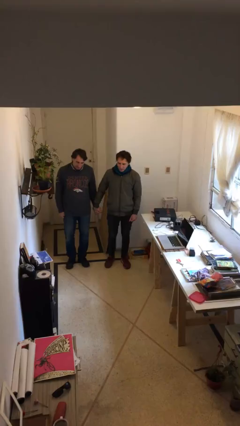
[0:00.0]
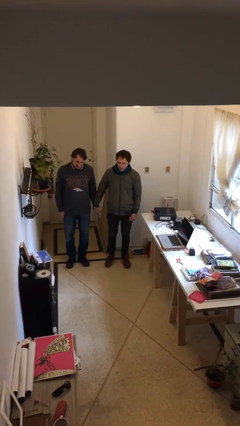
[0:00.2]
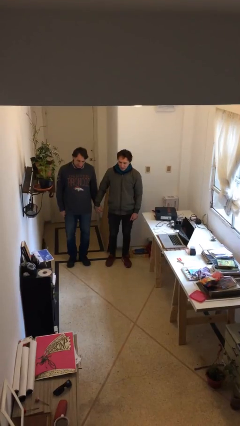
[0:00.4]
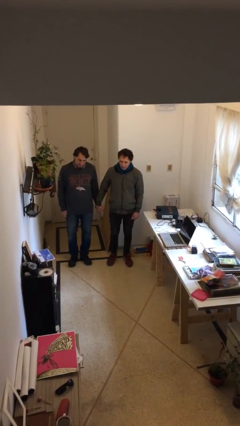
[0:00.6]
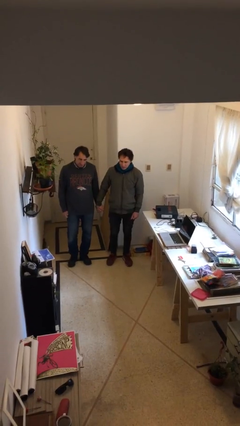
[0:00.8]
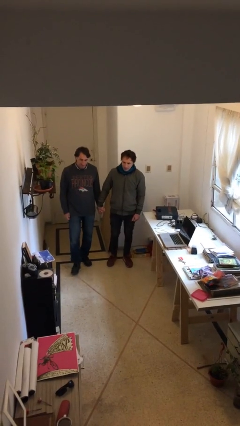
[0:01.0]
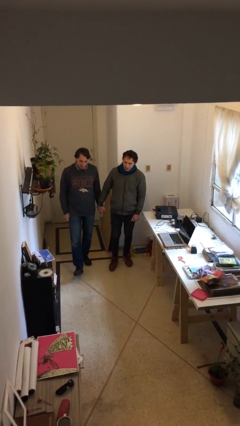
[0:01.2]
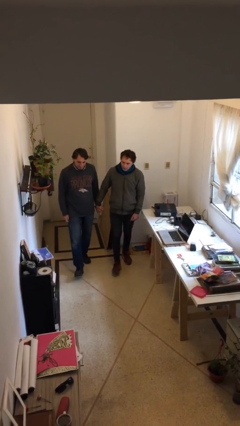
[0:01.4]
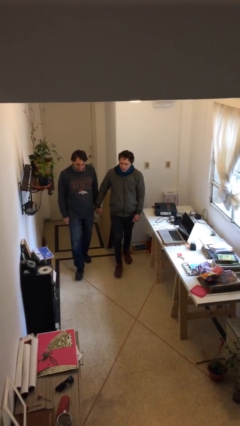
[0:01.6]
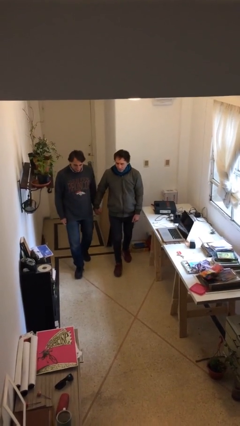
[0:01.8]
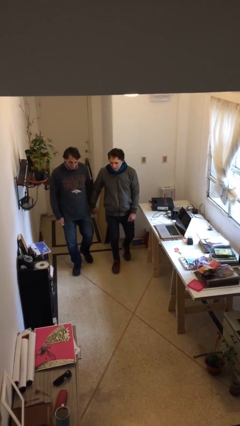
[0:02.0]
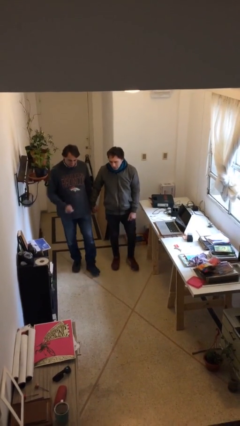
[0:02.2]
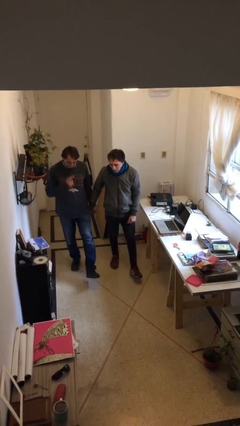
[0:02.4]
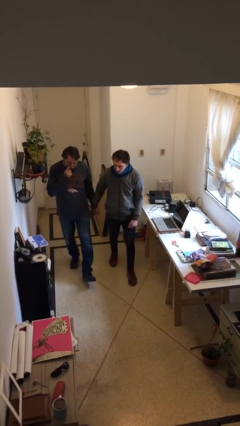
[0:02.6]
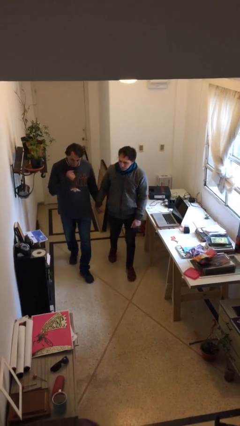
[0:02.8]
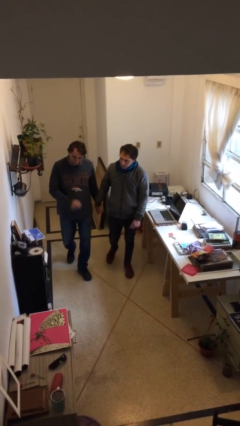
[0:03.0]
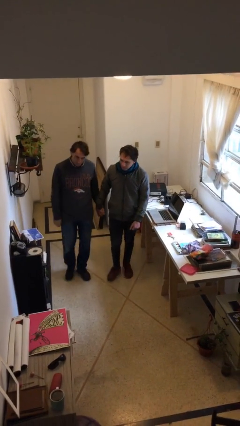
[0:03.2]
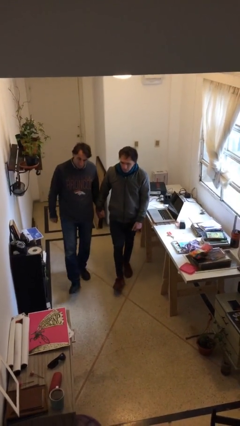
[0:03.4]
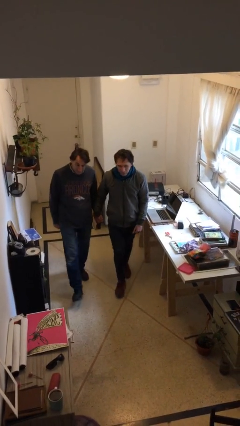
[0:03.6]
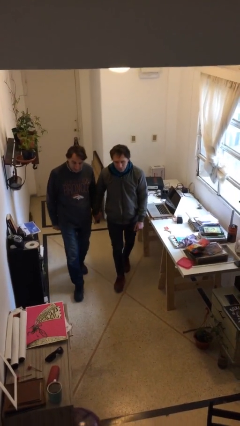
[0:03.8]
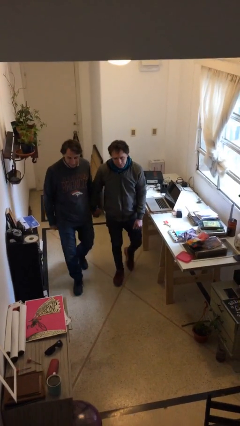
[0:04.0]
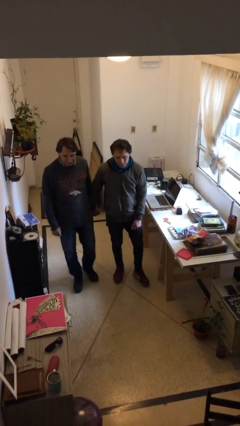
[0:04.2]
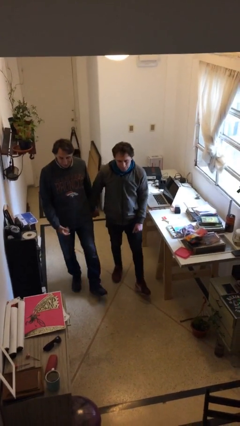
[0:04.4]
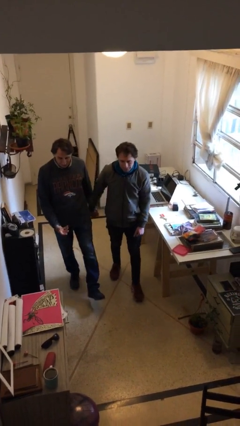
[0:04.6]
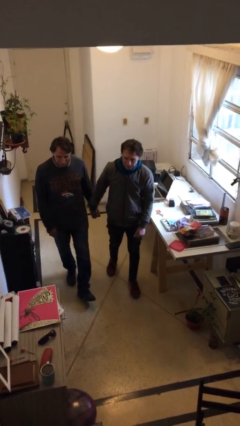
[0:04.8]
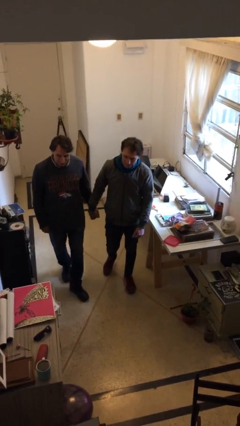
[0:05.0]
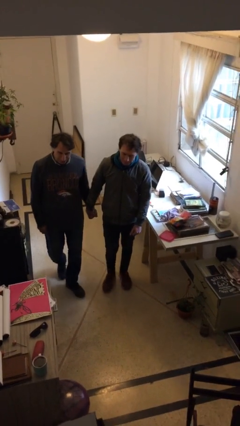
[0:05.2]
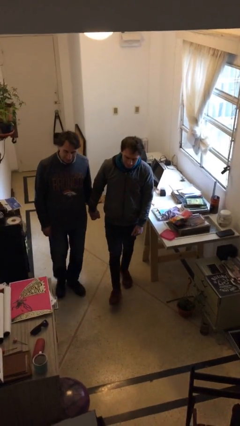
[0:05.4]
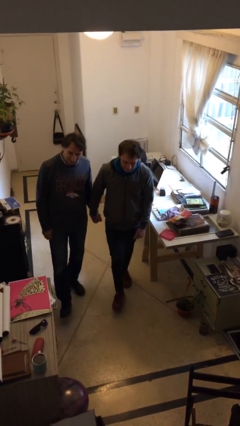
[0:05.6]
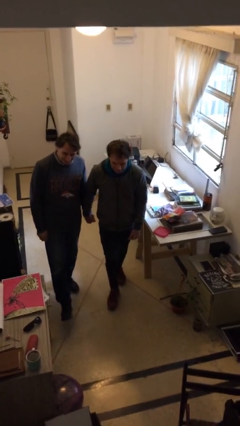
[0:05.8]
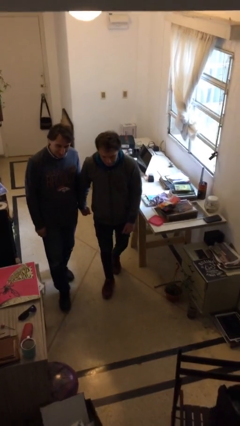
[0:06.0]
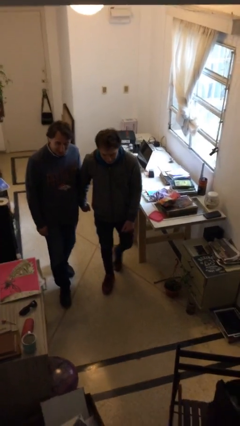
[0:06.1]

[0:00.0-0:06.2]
person holds hand

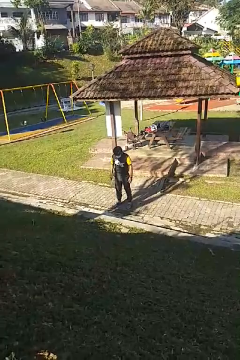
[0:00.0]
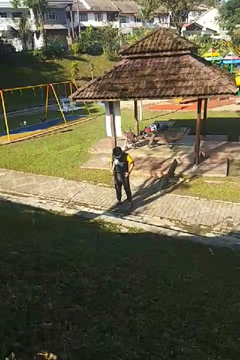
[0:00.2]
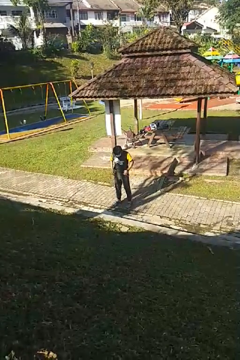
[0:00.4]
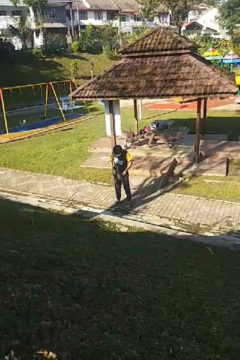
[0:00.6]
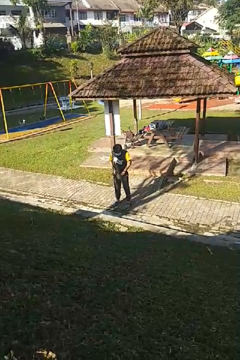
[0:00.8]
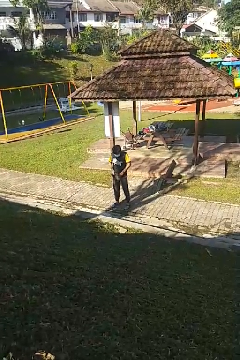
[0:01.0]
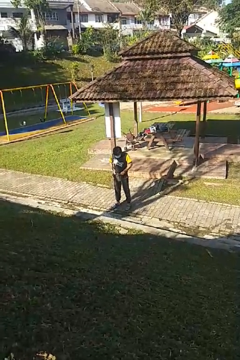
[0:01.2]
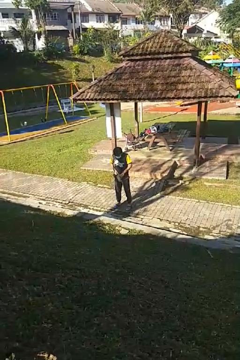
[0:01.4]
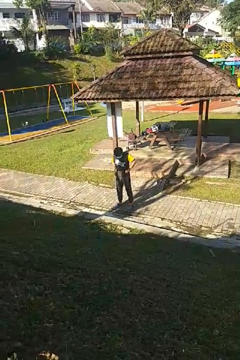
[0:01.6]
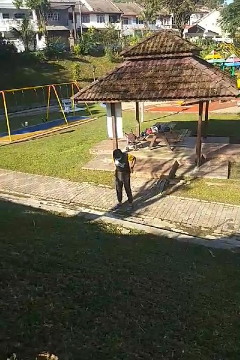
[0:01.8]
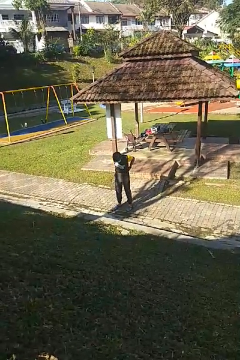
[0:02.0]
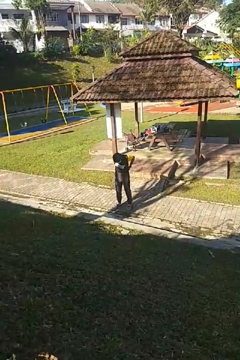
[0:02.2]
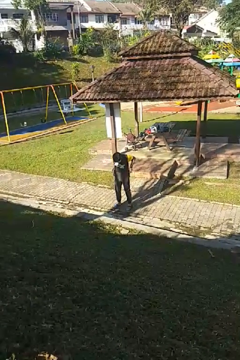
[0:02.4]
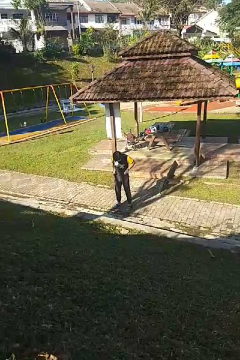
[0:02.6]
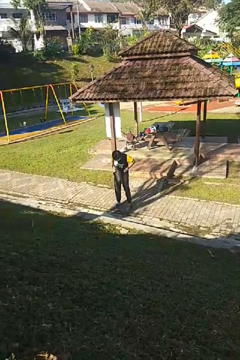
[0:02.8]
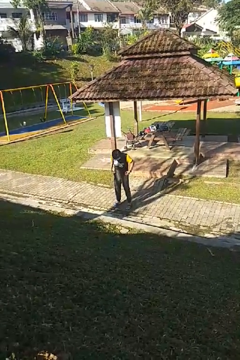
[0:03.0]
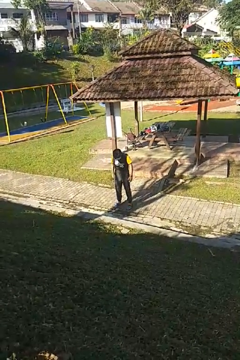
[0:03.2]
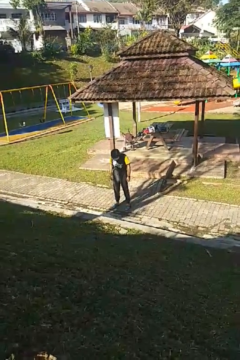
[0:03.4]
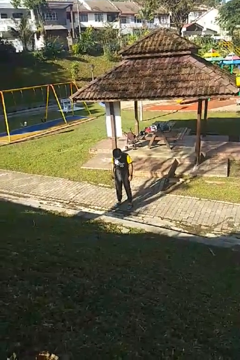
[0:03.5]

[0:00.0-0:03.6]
person hikes up pants

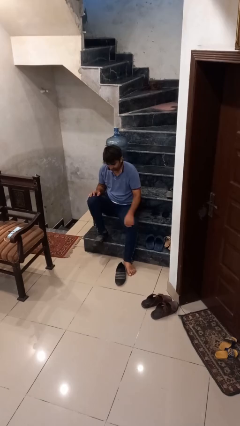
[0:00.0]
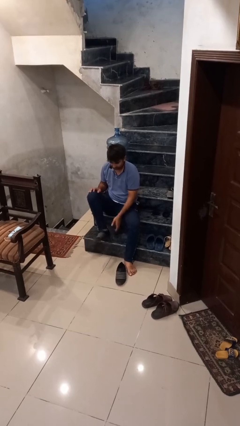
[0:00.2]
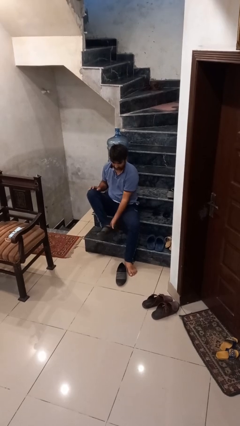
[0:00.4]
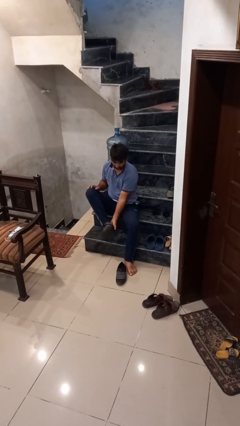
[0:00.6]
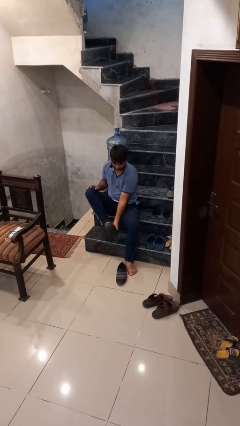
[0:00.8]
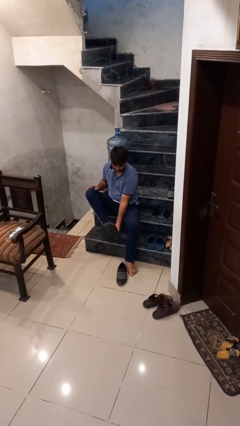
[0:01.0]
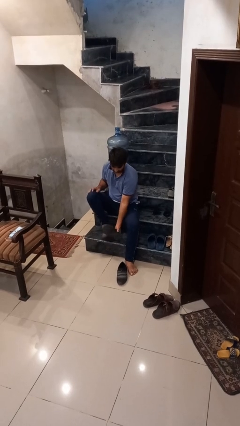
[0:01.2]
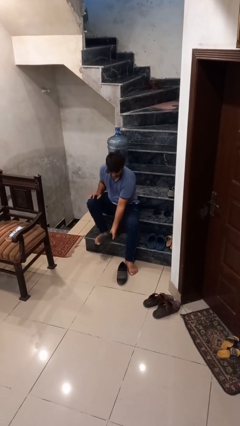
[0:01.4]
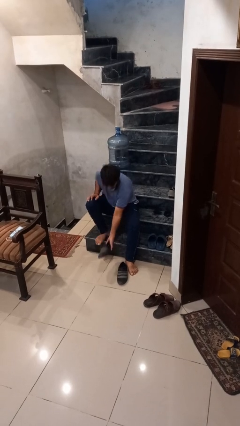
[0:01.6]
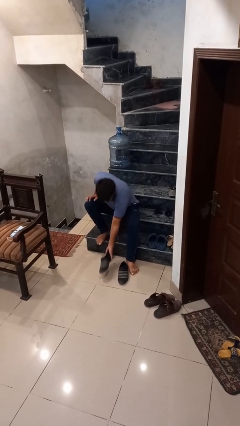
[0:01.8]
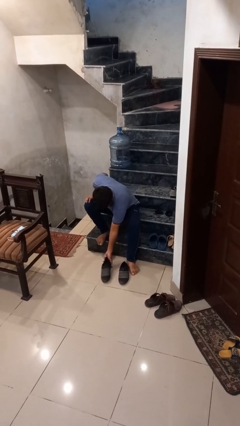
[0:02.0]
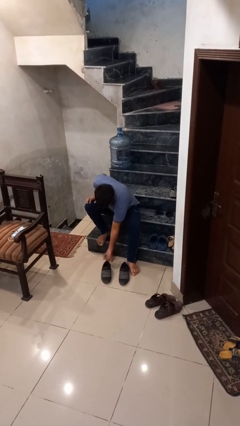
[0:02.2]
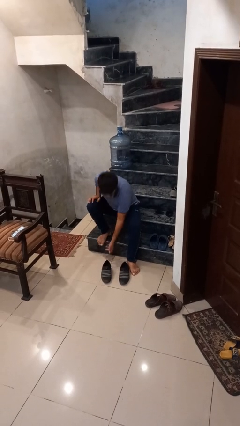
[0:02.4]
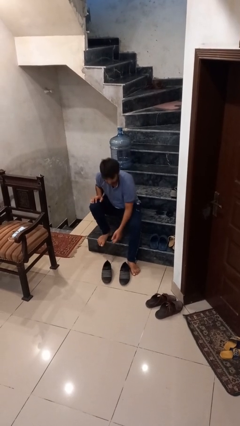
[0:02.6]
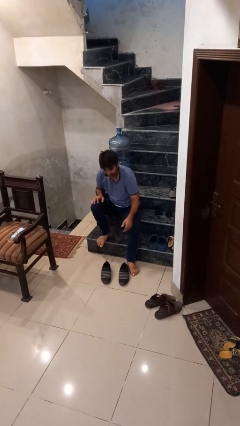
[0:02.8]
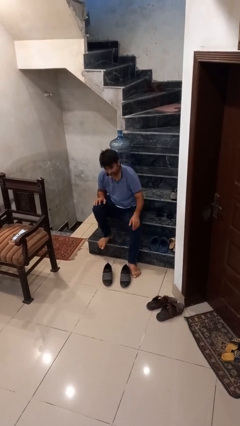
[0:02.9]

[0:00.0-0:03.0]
person takes off shoes

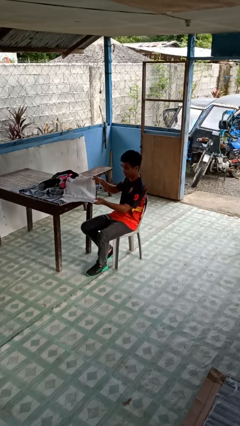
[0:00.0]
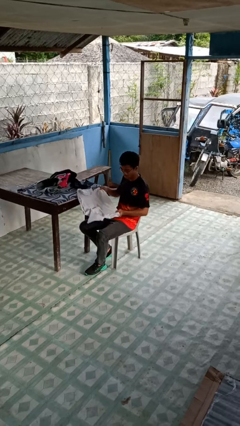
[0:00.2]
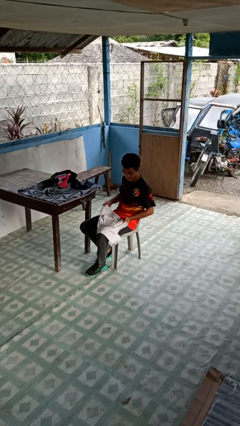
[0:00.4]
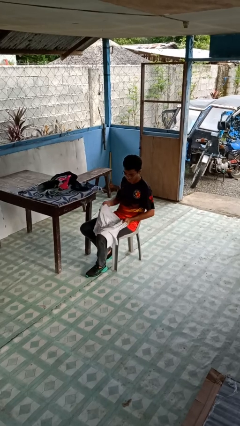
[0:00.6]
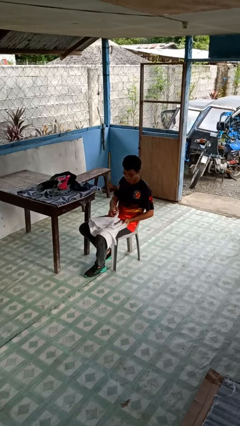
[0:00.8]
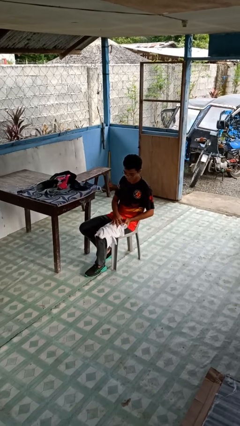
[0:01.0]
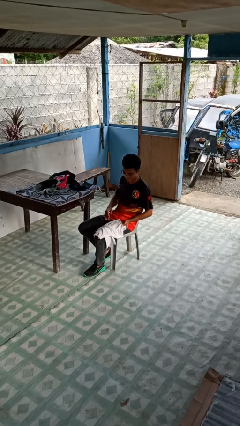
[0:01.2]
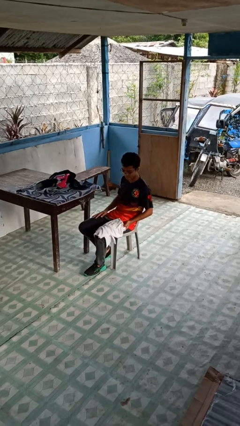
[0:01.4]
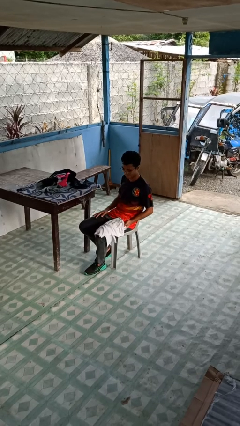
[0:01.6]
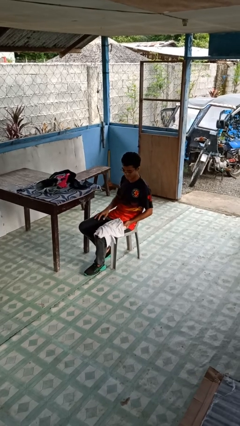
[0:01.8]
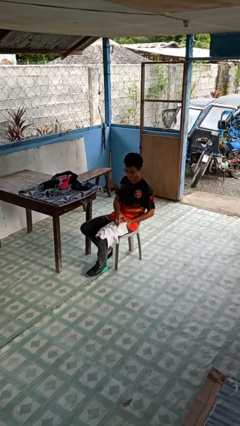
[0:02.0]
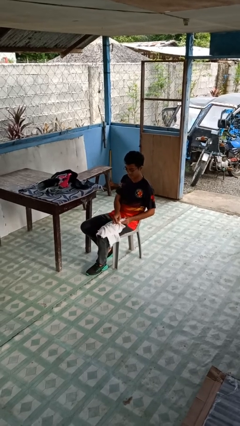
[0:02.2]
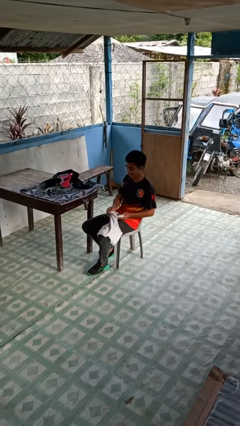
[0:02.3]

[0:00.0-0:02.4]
person folds shirt

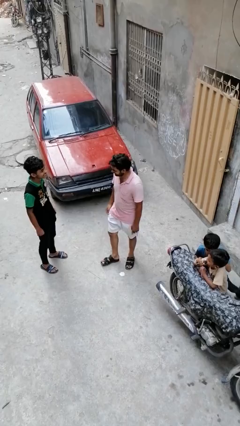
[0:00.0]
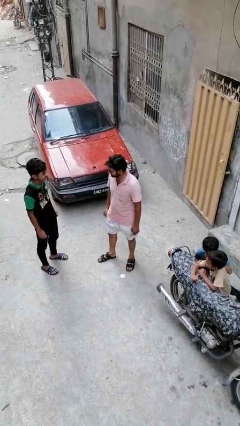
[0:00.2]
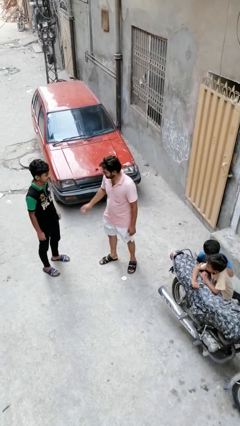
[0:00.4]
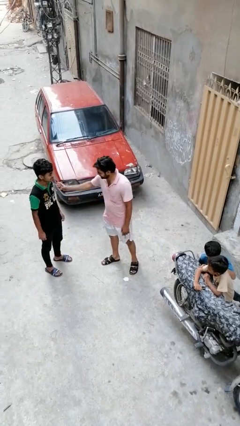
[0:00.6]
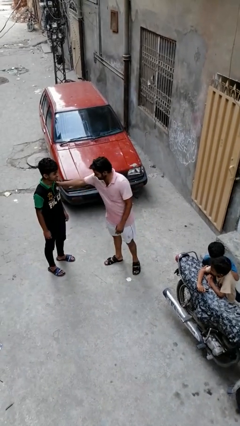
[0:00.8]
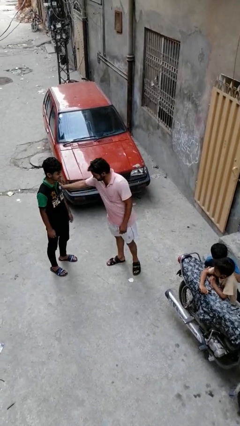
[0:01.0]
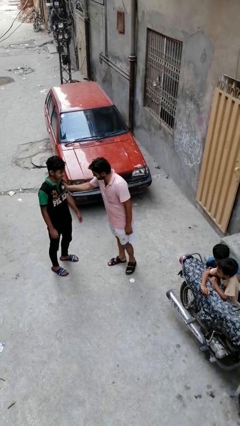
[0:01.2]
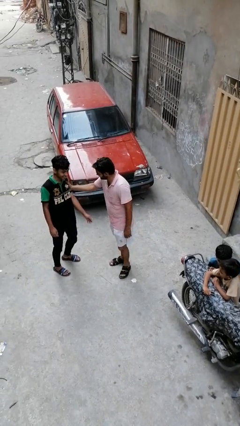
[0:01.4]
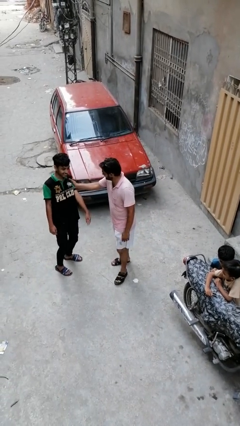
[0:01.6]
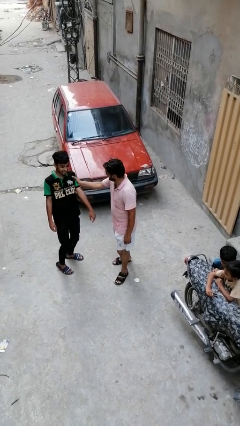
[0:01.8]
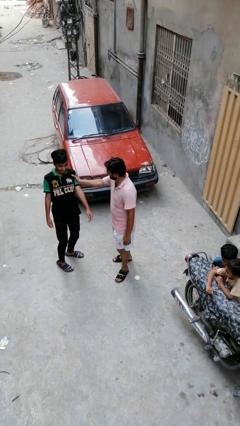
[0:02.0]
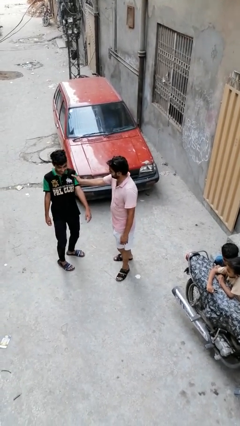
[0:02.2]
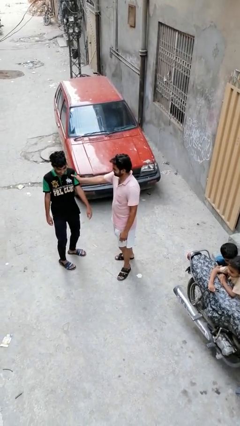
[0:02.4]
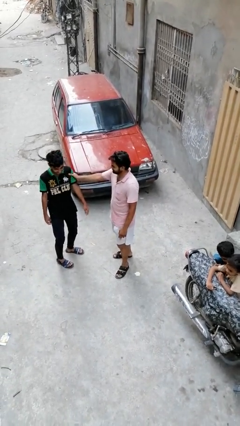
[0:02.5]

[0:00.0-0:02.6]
person grabs person by bicep

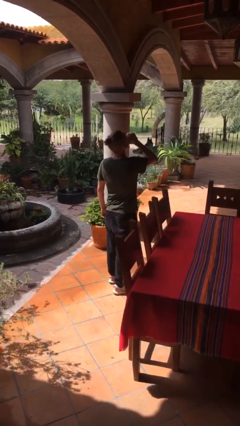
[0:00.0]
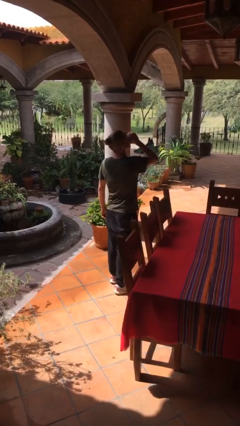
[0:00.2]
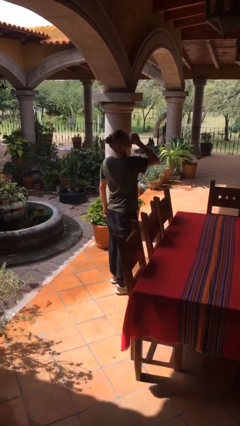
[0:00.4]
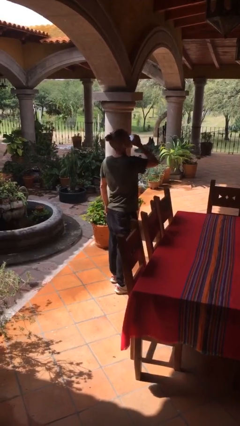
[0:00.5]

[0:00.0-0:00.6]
person drinks from beverage can
